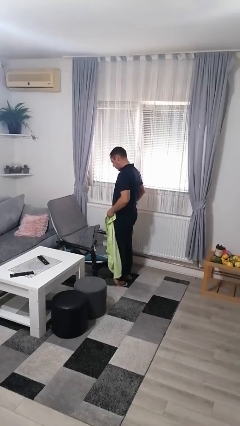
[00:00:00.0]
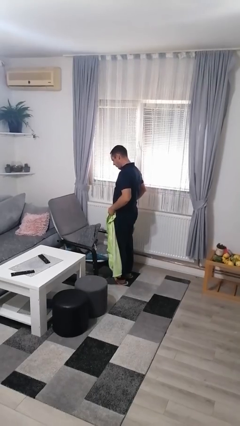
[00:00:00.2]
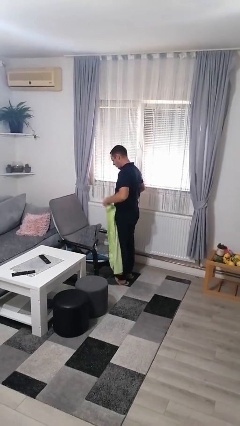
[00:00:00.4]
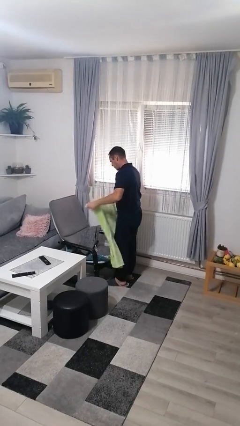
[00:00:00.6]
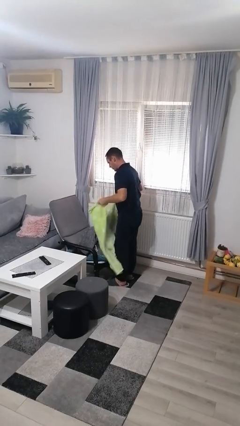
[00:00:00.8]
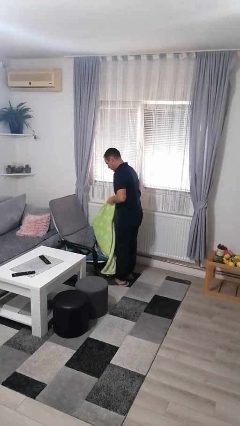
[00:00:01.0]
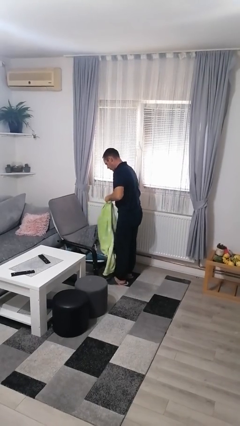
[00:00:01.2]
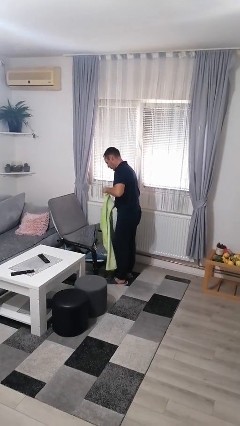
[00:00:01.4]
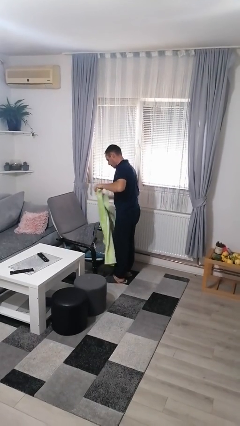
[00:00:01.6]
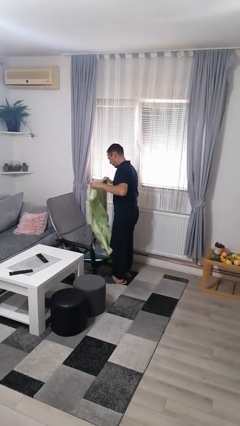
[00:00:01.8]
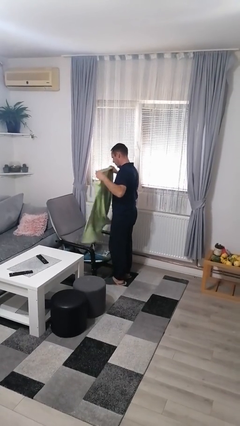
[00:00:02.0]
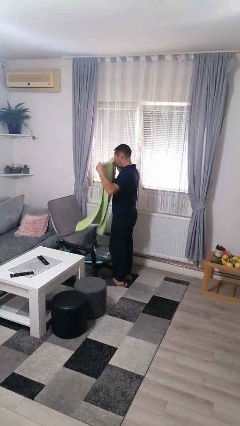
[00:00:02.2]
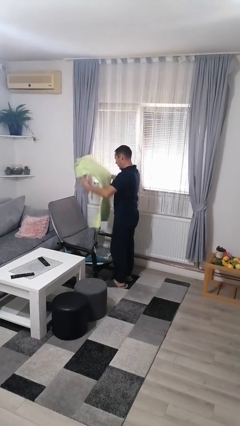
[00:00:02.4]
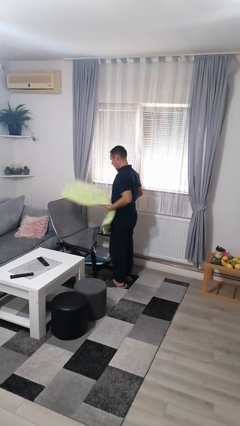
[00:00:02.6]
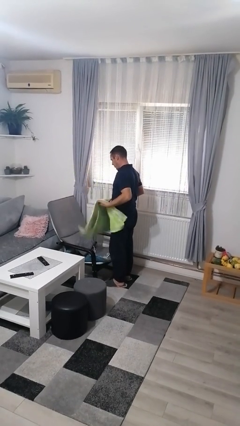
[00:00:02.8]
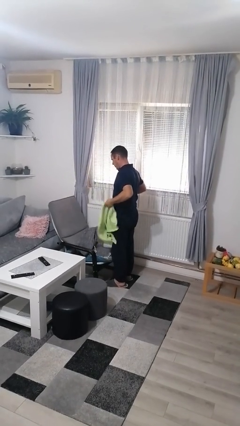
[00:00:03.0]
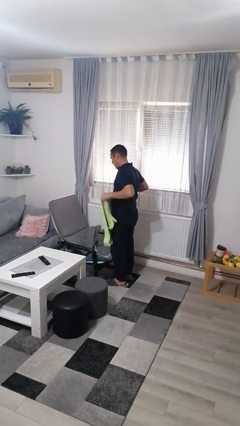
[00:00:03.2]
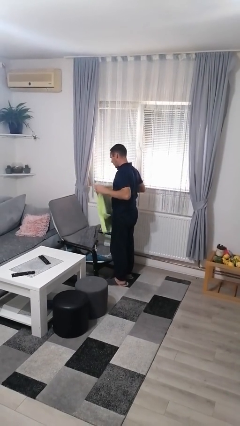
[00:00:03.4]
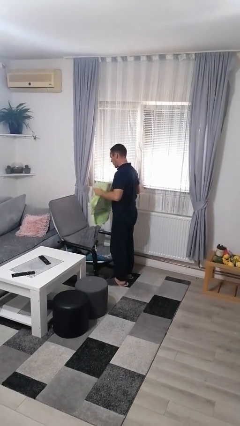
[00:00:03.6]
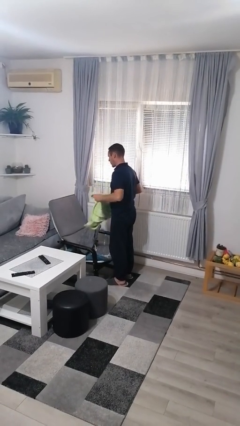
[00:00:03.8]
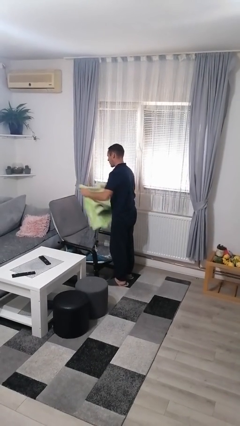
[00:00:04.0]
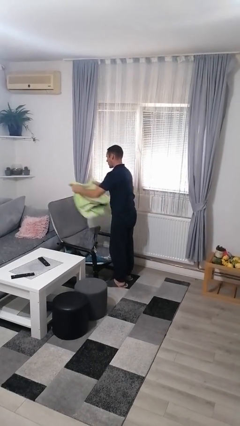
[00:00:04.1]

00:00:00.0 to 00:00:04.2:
person folds blanket

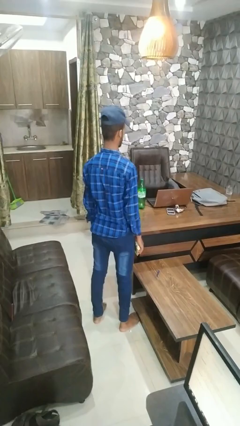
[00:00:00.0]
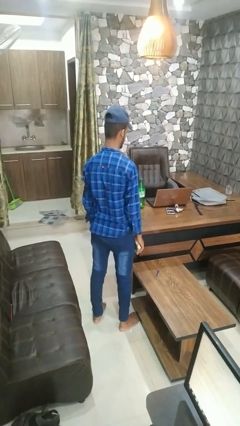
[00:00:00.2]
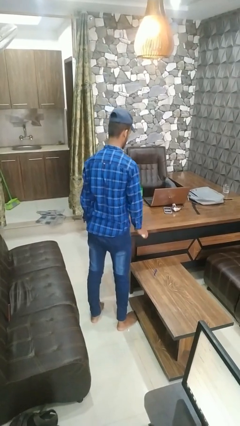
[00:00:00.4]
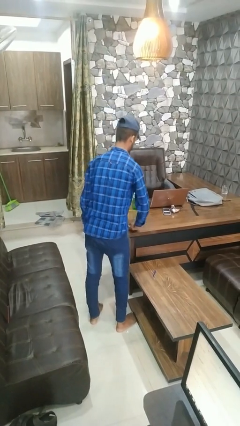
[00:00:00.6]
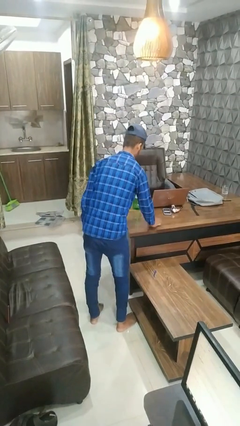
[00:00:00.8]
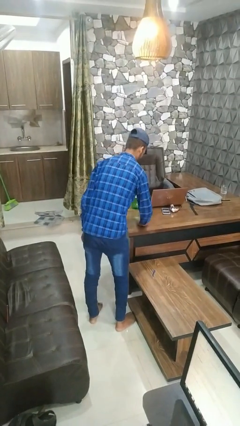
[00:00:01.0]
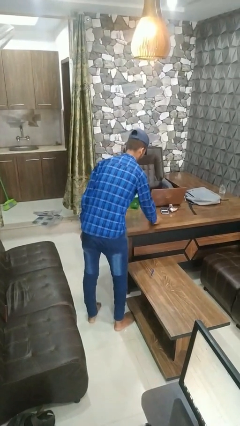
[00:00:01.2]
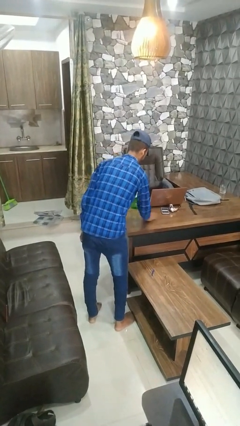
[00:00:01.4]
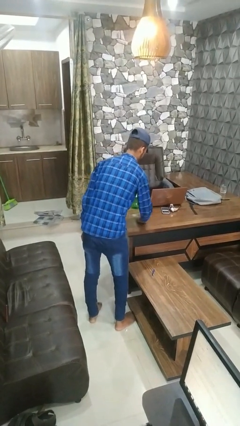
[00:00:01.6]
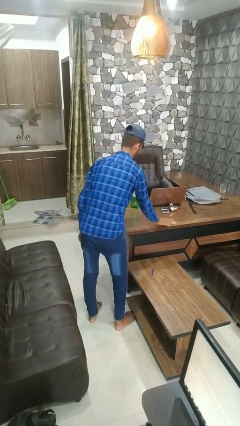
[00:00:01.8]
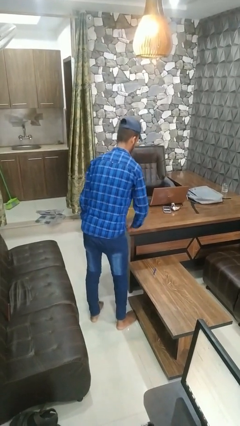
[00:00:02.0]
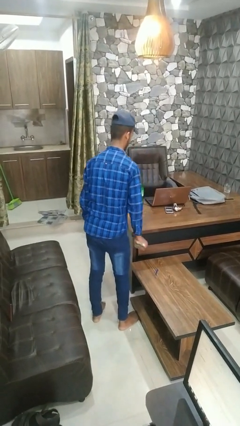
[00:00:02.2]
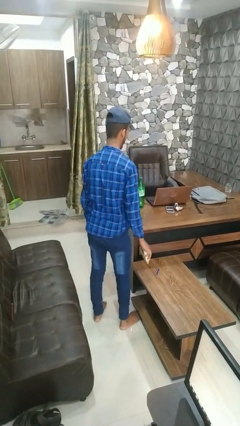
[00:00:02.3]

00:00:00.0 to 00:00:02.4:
person dusts furniture

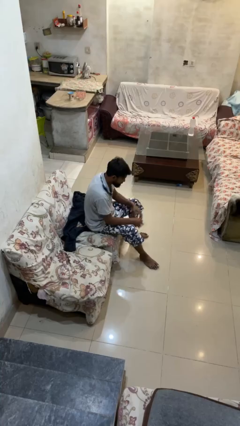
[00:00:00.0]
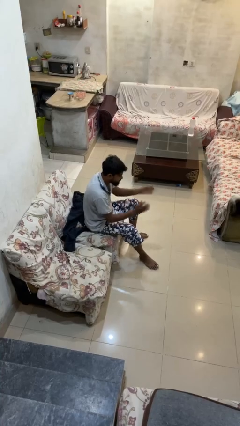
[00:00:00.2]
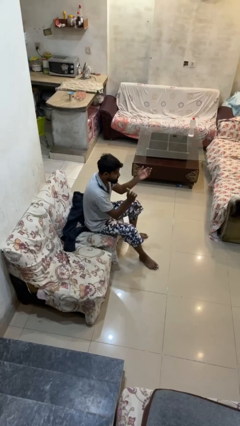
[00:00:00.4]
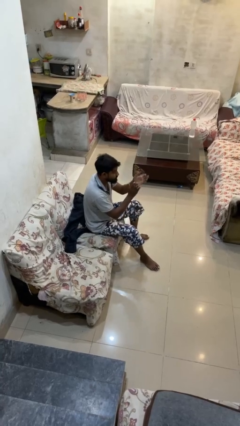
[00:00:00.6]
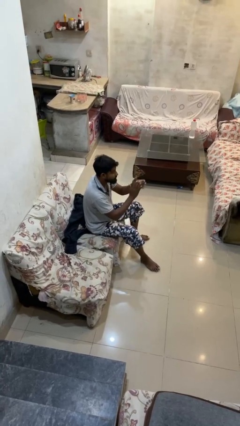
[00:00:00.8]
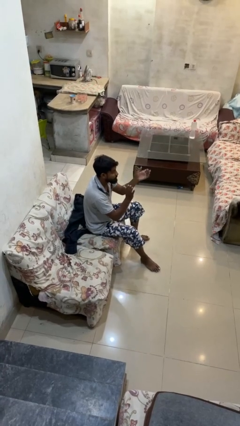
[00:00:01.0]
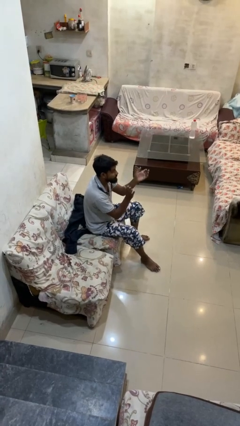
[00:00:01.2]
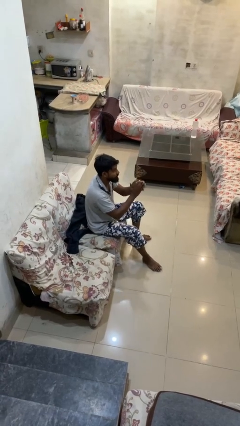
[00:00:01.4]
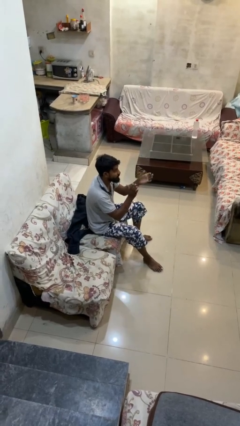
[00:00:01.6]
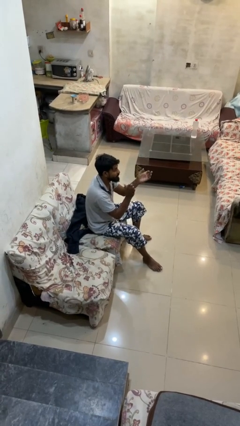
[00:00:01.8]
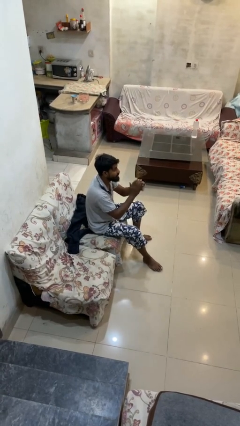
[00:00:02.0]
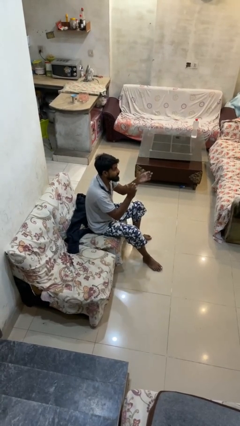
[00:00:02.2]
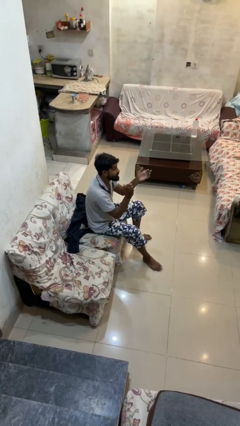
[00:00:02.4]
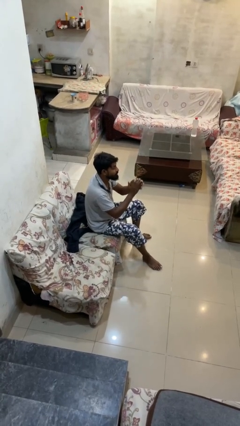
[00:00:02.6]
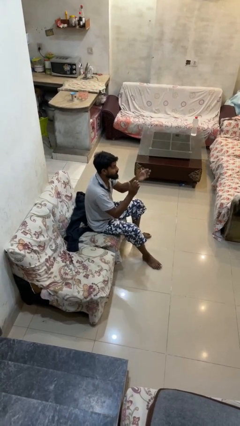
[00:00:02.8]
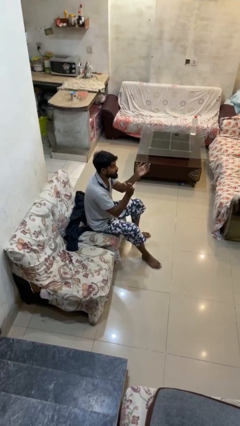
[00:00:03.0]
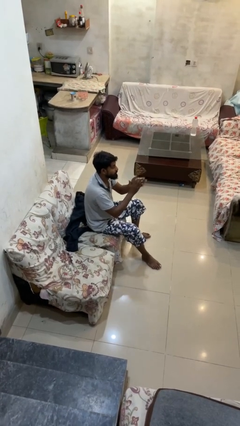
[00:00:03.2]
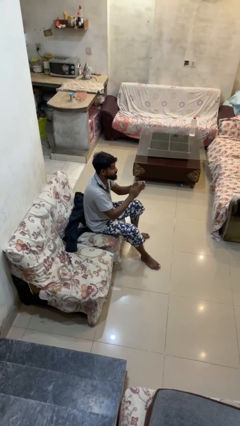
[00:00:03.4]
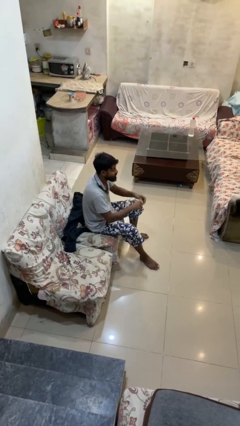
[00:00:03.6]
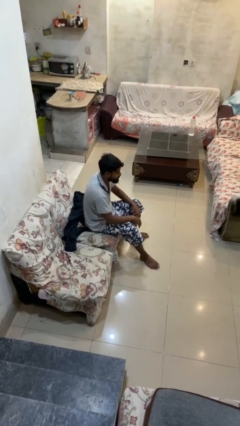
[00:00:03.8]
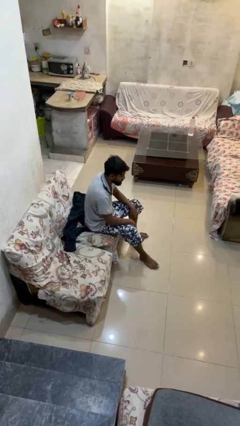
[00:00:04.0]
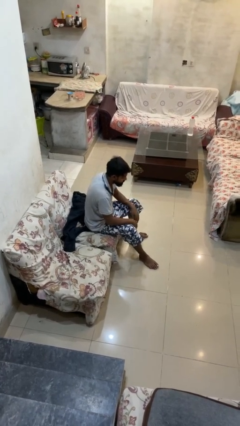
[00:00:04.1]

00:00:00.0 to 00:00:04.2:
person claps hands

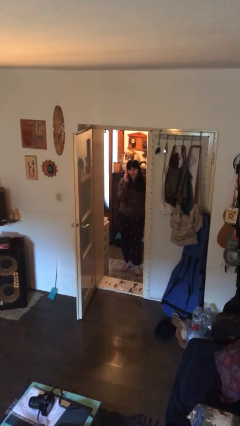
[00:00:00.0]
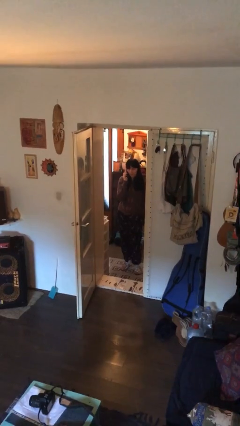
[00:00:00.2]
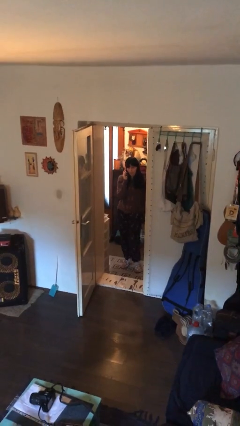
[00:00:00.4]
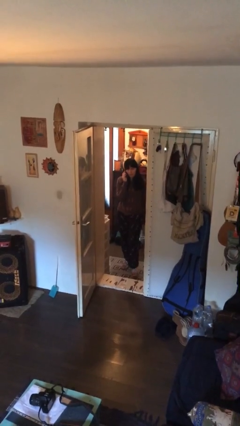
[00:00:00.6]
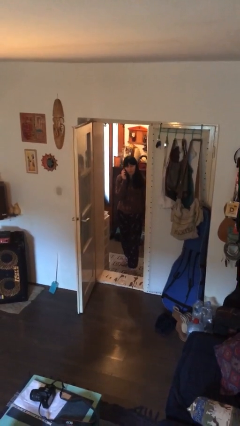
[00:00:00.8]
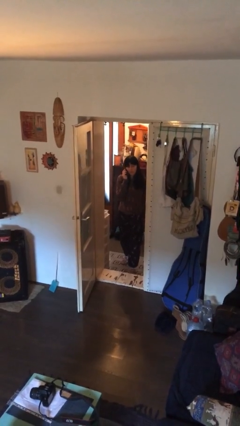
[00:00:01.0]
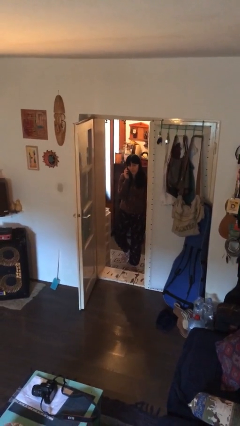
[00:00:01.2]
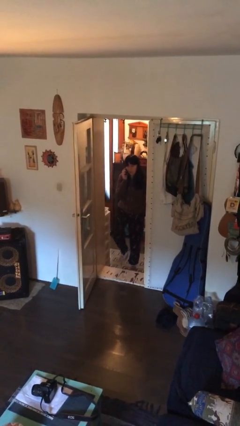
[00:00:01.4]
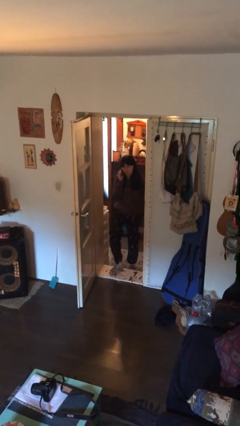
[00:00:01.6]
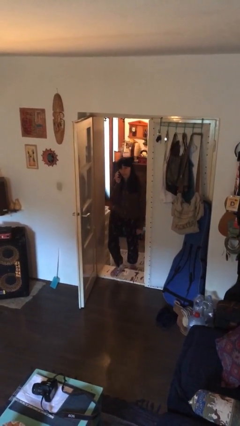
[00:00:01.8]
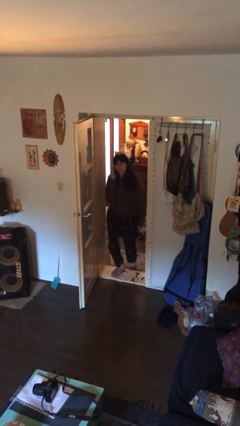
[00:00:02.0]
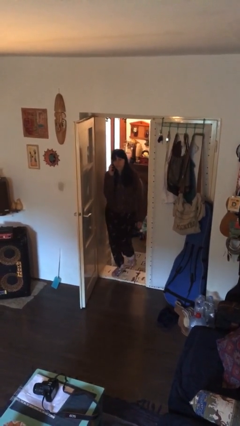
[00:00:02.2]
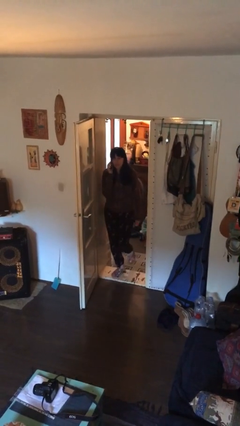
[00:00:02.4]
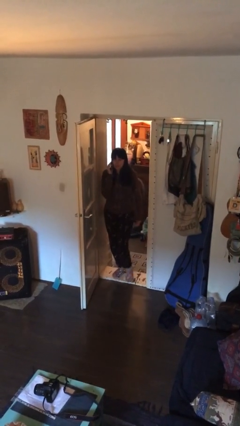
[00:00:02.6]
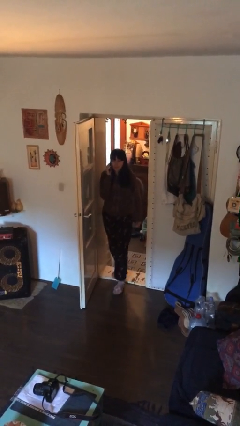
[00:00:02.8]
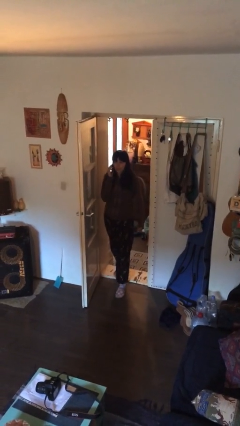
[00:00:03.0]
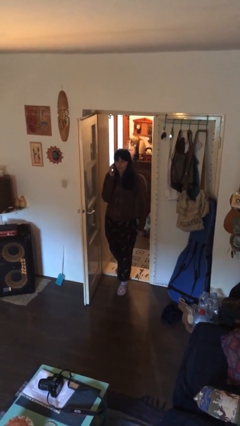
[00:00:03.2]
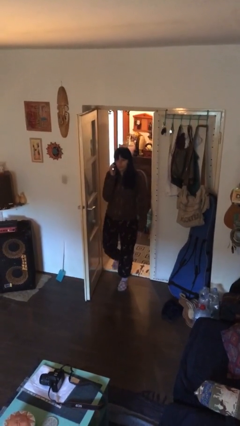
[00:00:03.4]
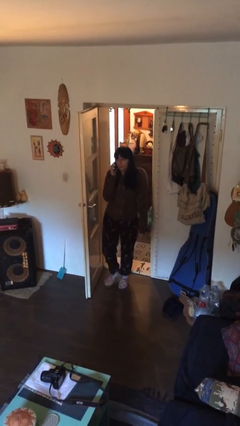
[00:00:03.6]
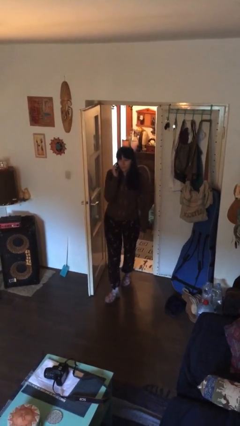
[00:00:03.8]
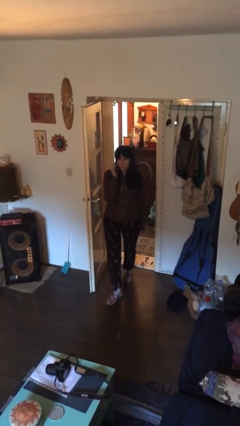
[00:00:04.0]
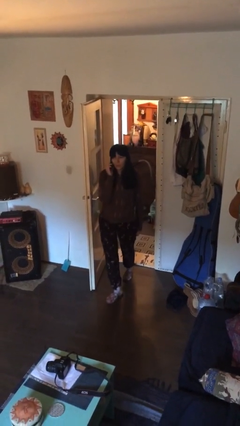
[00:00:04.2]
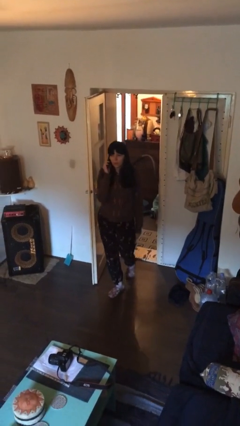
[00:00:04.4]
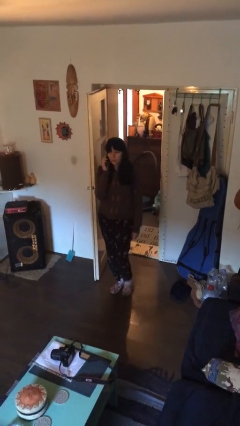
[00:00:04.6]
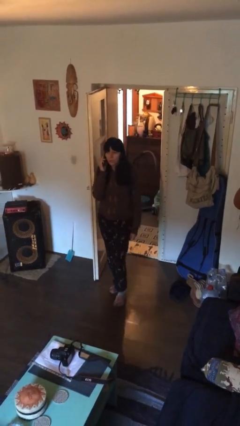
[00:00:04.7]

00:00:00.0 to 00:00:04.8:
person enters scene through structure

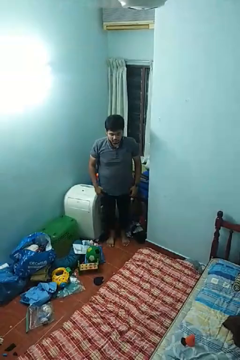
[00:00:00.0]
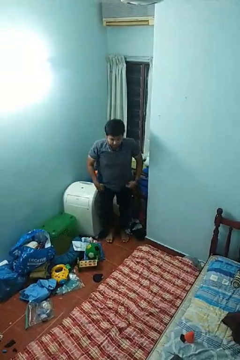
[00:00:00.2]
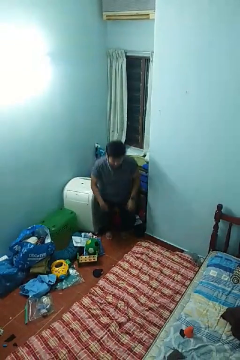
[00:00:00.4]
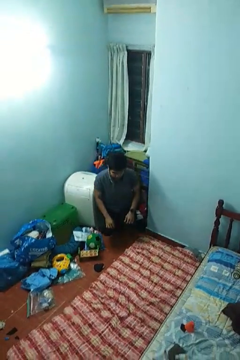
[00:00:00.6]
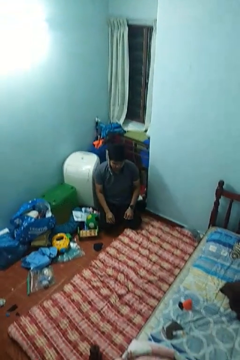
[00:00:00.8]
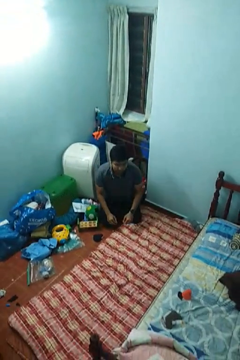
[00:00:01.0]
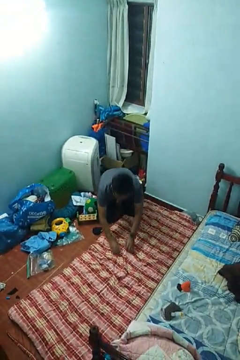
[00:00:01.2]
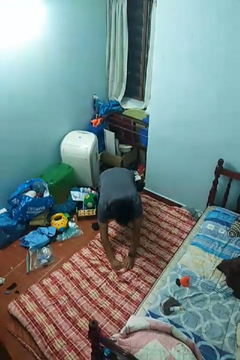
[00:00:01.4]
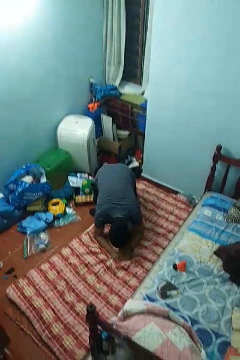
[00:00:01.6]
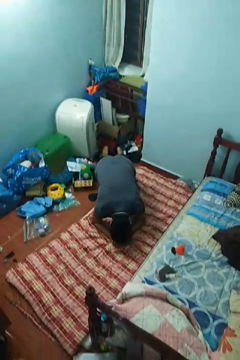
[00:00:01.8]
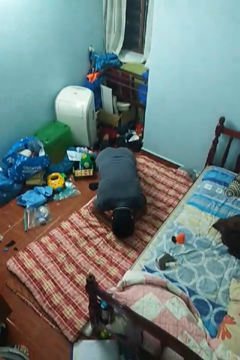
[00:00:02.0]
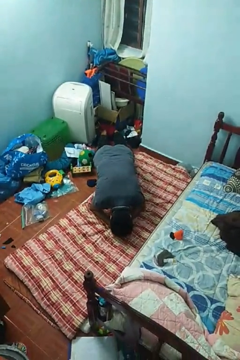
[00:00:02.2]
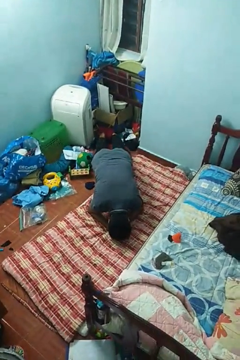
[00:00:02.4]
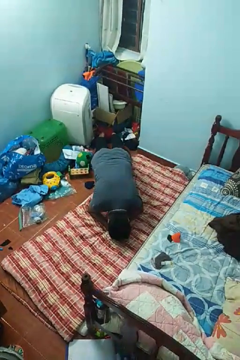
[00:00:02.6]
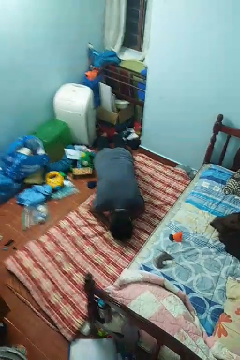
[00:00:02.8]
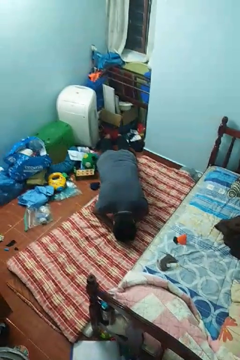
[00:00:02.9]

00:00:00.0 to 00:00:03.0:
person exercises with plank
